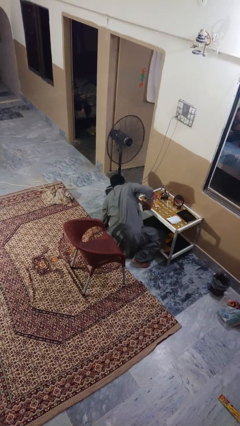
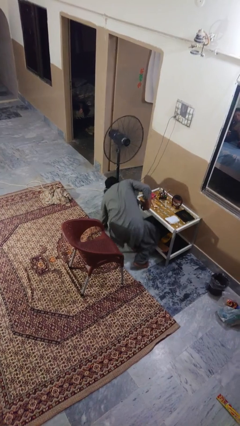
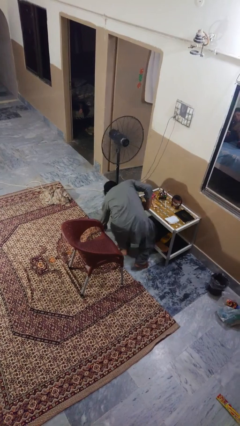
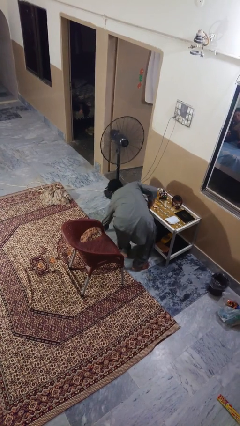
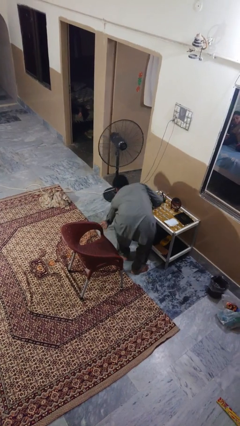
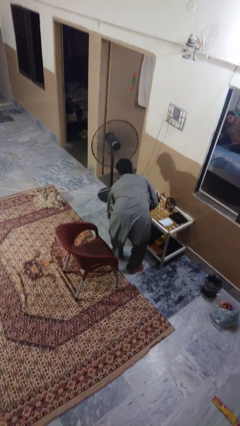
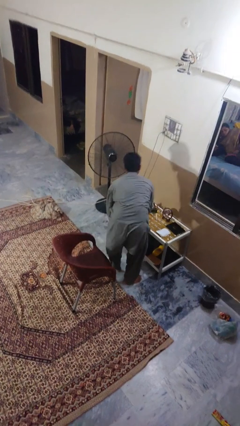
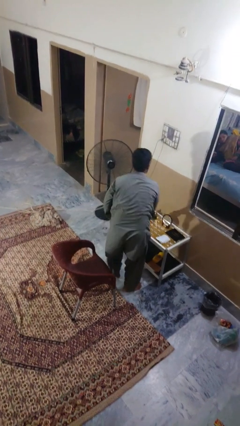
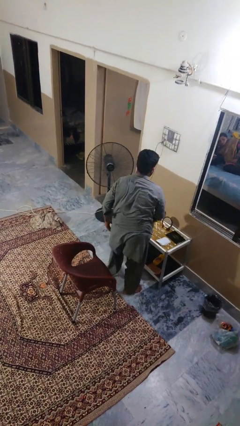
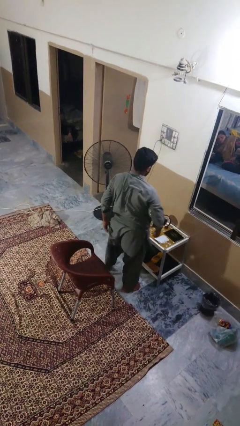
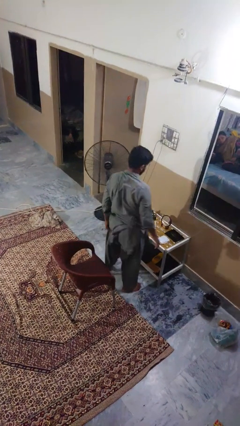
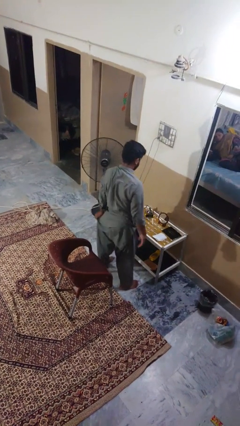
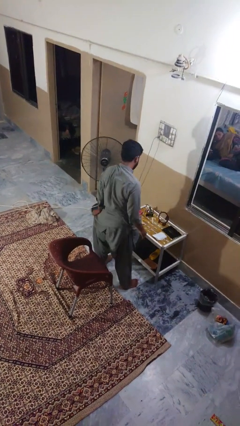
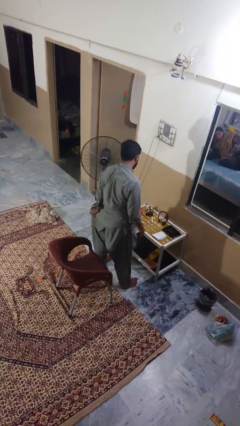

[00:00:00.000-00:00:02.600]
person stands up from floor

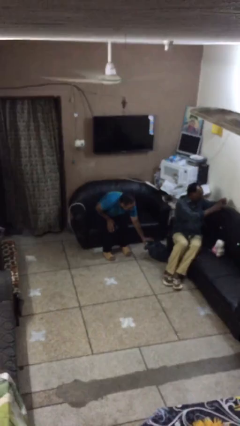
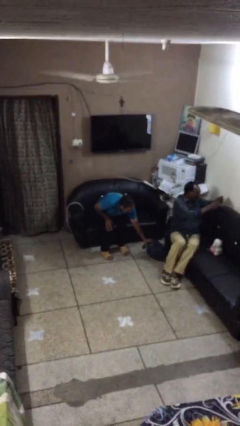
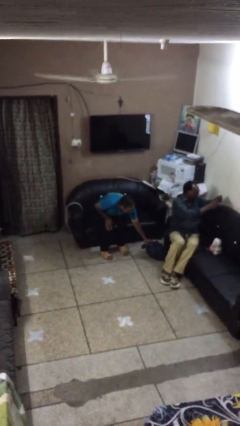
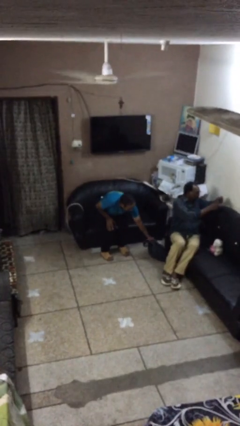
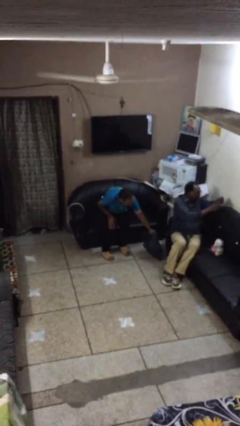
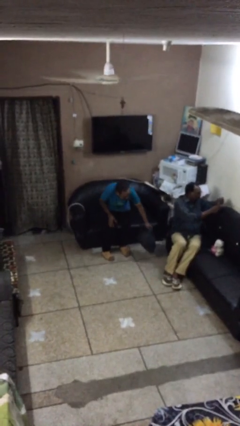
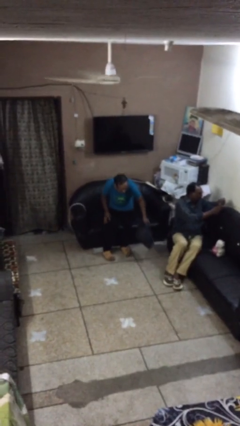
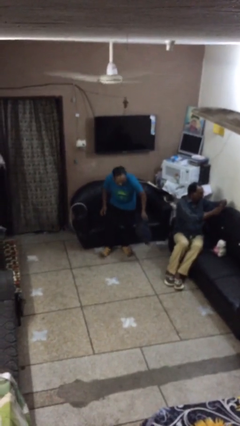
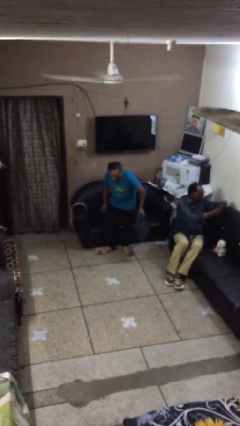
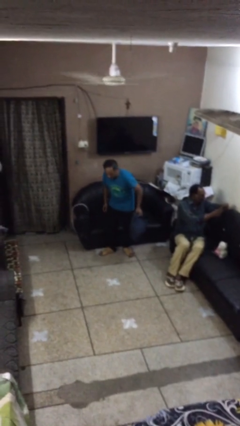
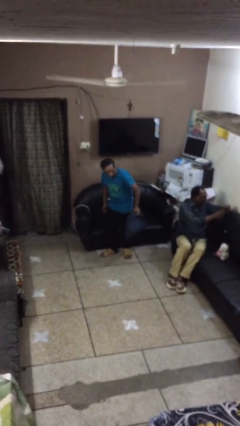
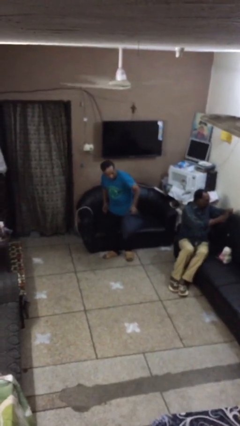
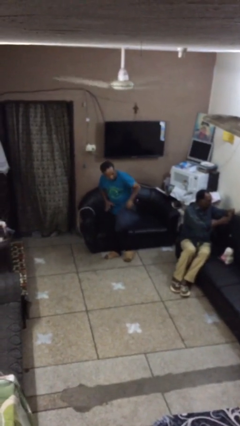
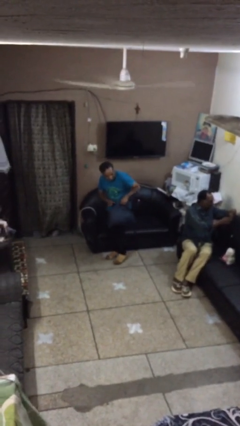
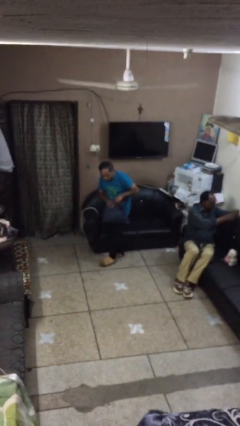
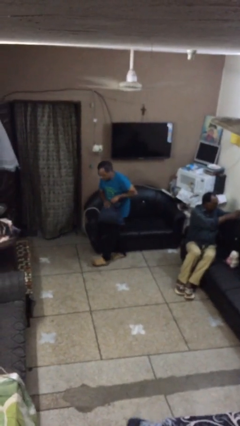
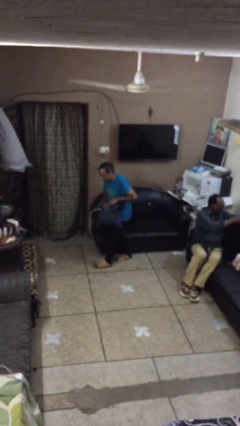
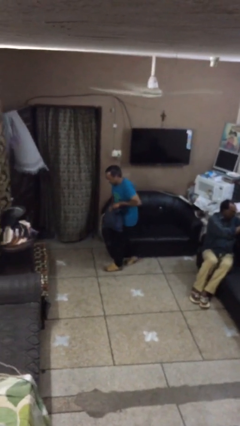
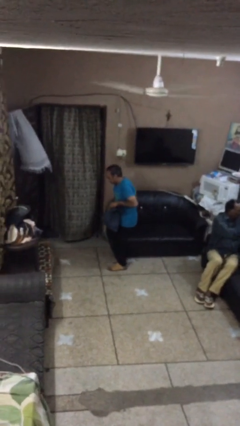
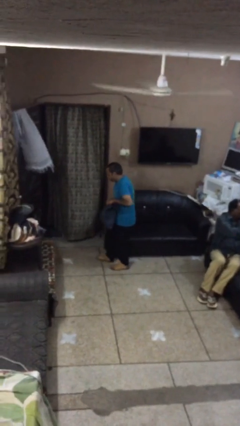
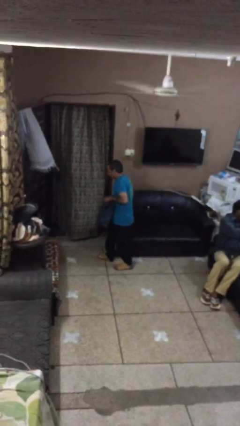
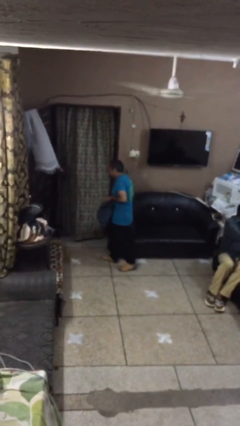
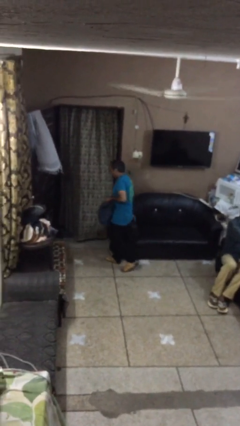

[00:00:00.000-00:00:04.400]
person steals object from person

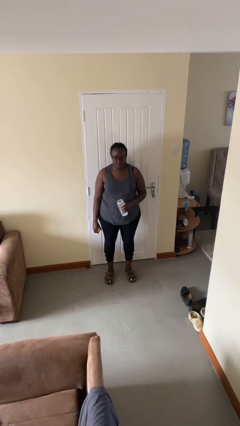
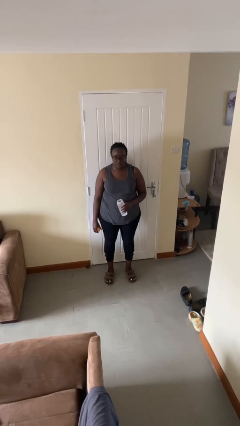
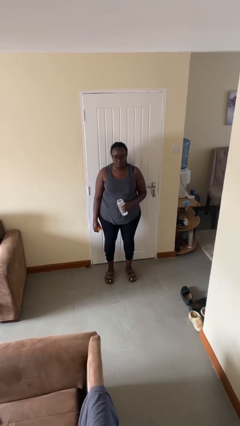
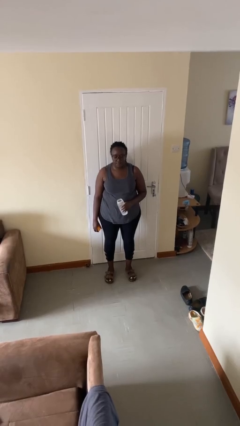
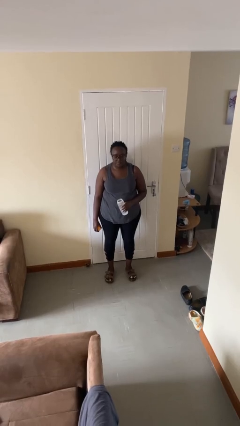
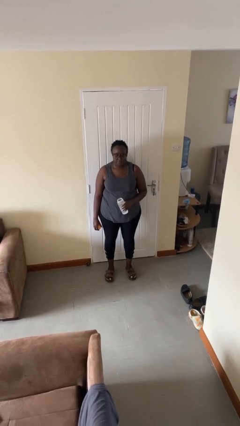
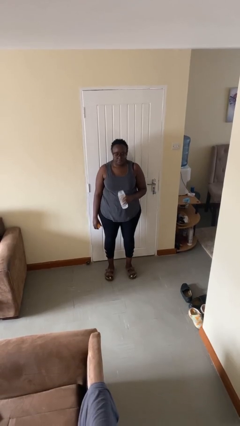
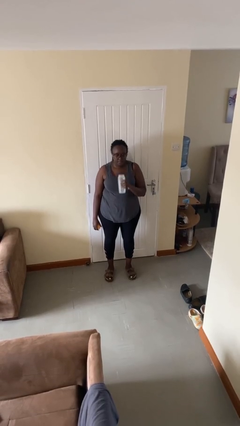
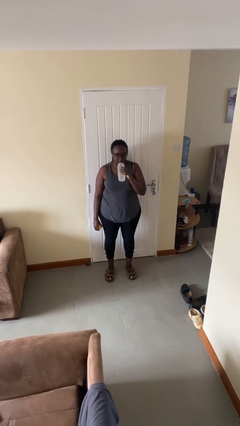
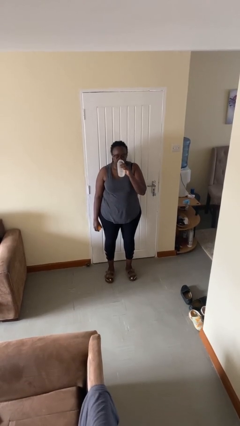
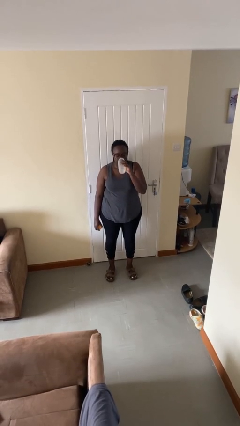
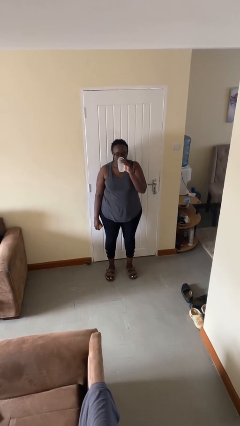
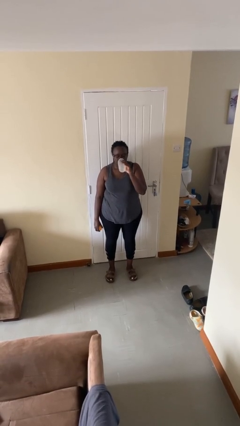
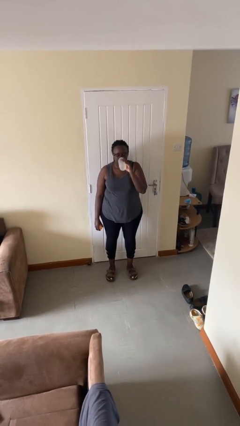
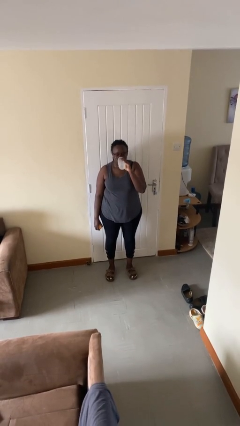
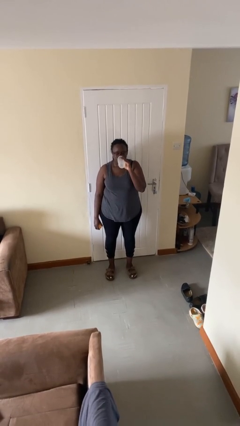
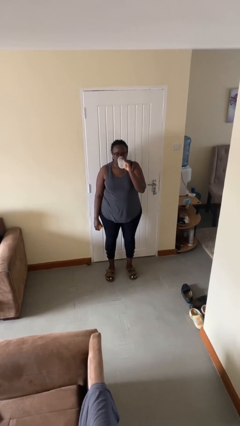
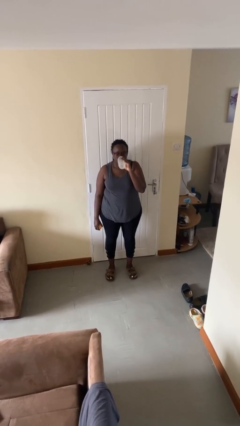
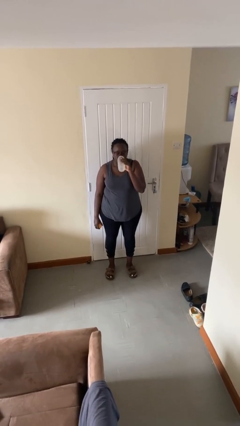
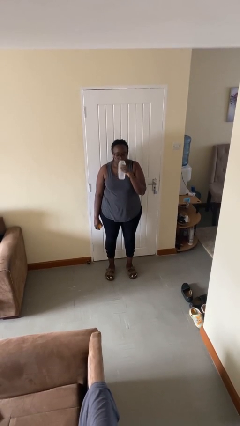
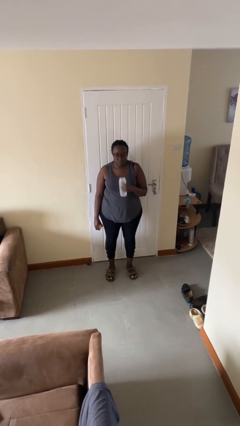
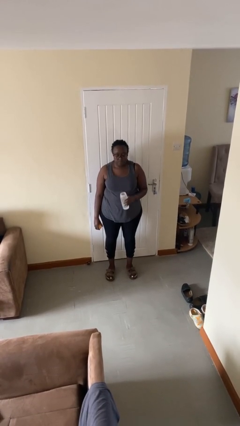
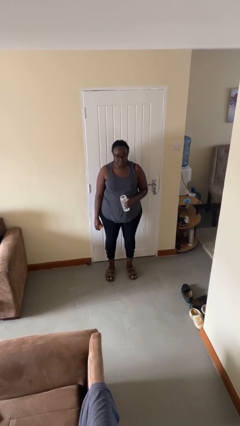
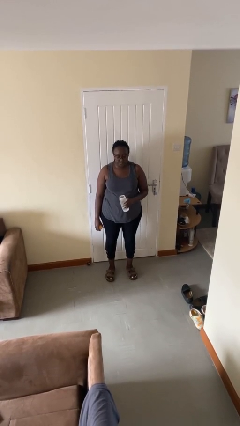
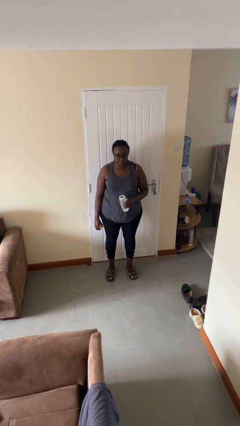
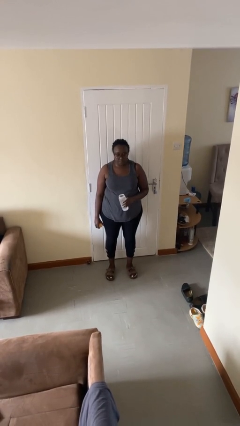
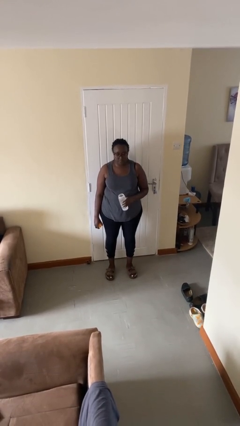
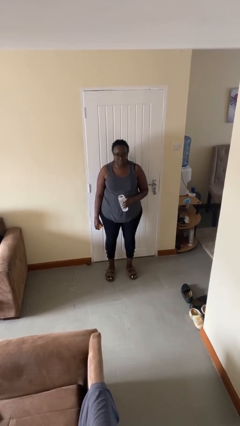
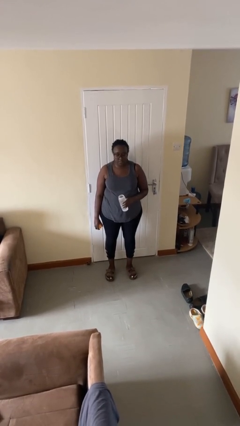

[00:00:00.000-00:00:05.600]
person drinks from bottle

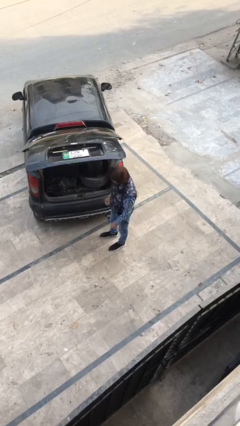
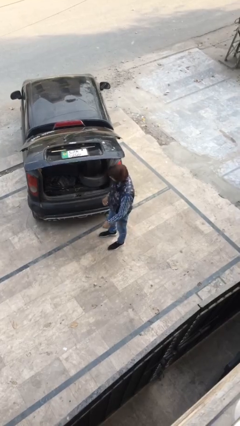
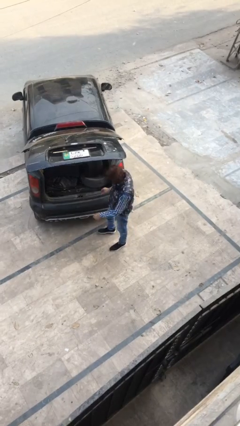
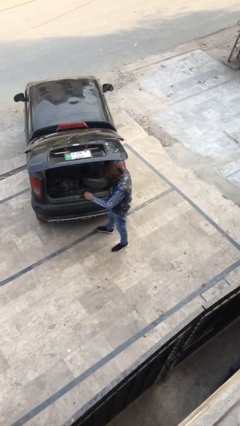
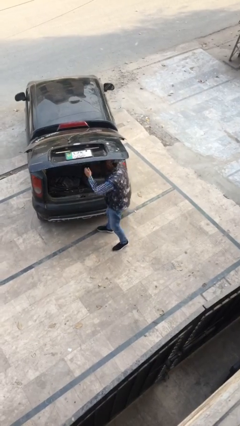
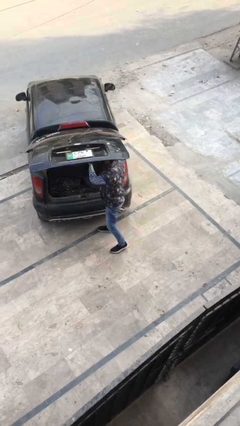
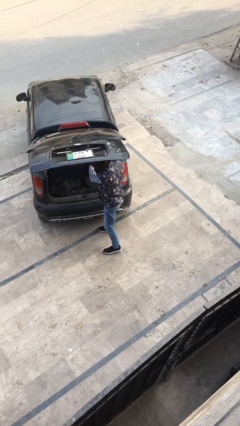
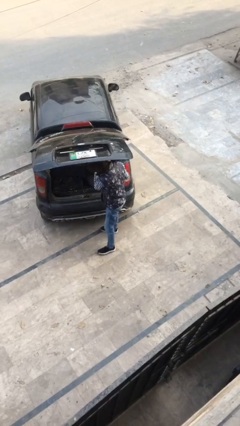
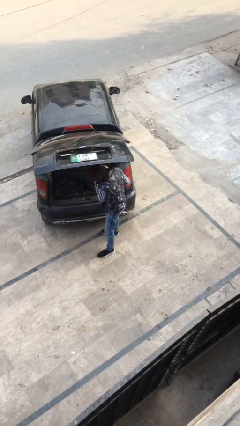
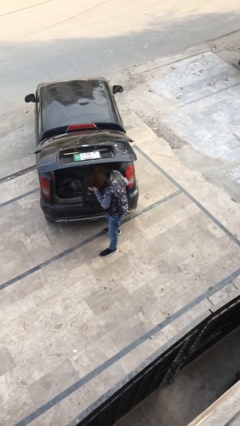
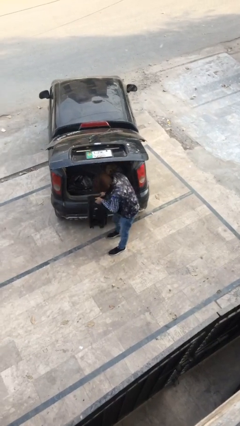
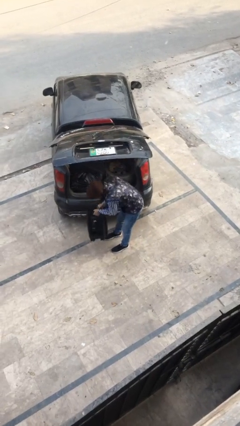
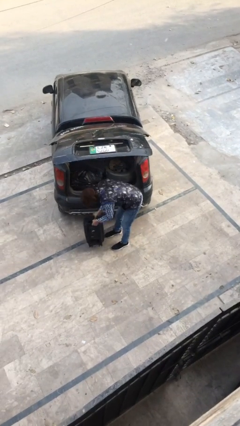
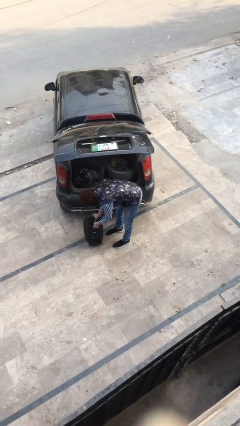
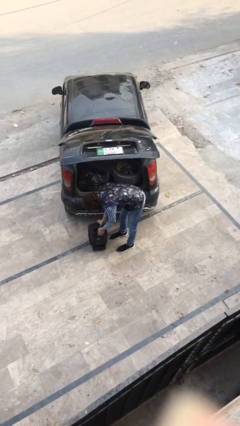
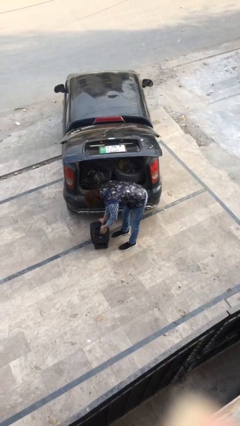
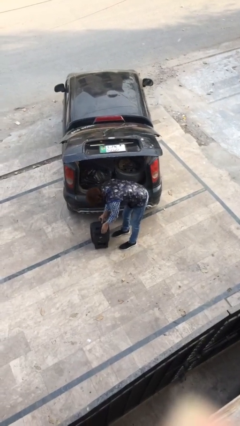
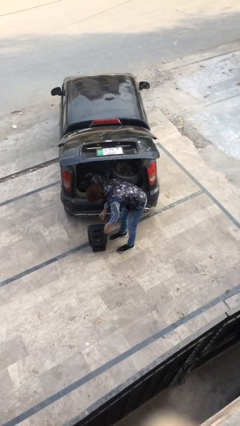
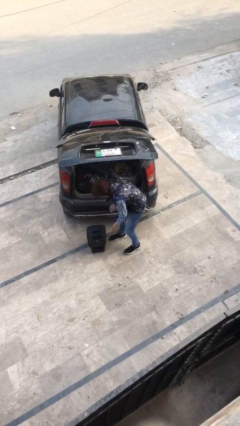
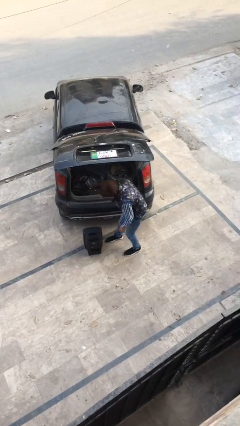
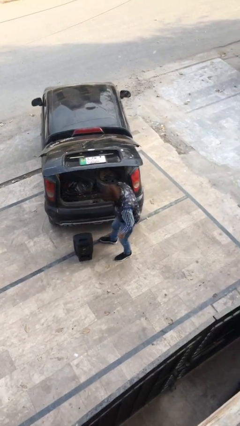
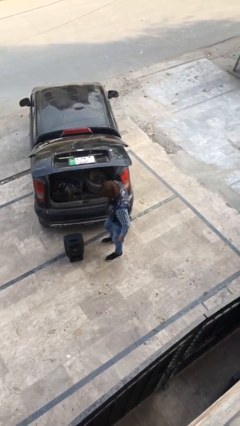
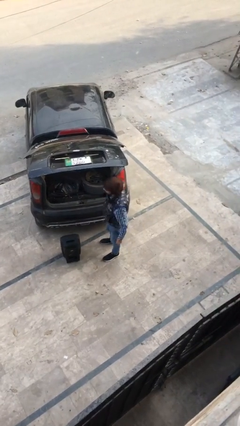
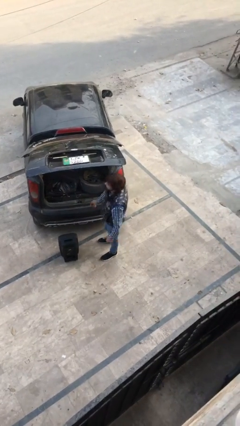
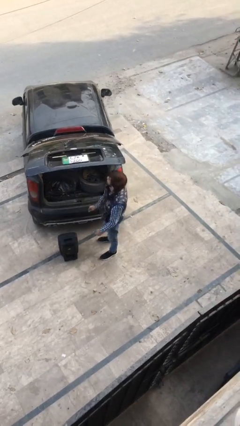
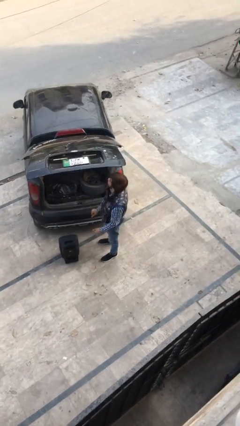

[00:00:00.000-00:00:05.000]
person unloads car

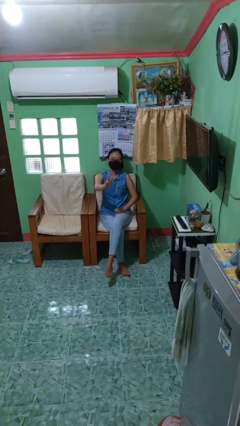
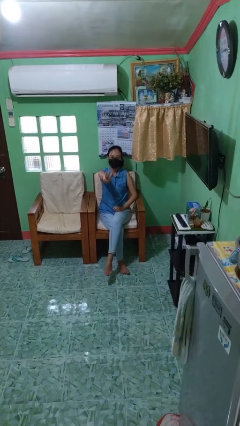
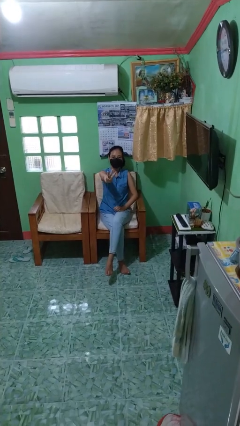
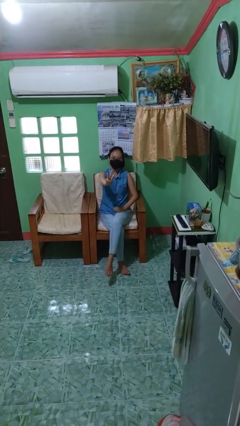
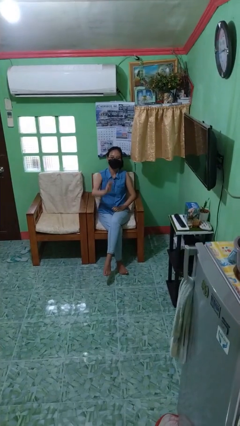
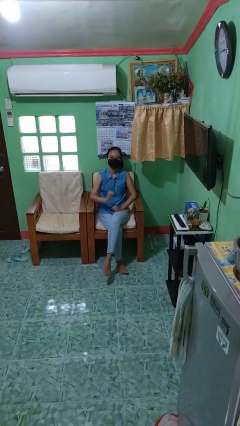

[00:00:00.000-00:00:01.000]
person gestures number three
